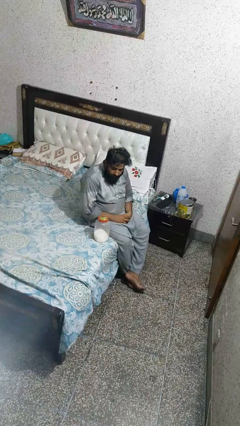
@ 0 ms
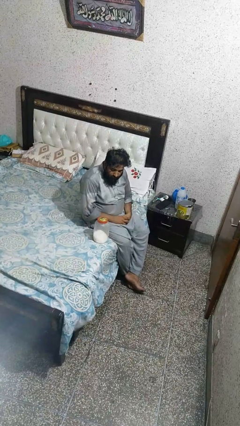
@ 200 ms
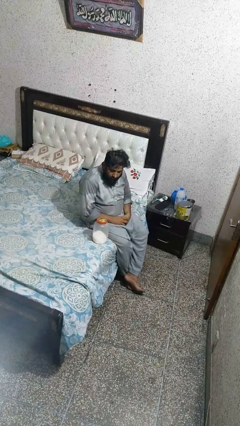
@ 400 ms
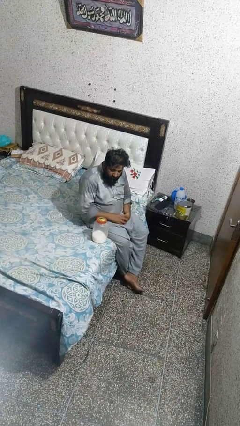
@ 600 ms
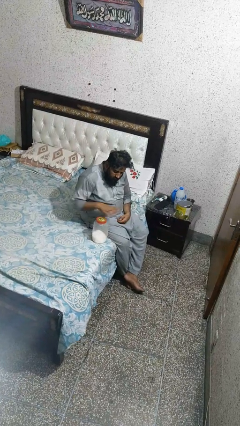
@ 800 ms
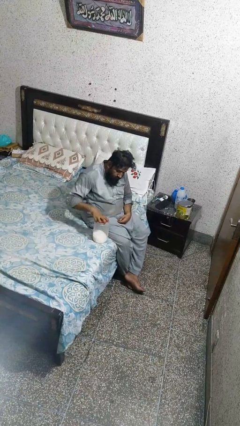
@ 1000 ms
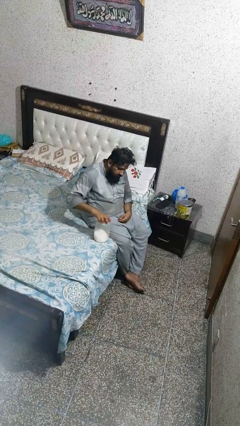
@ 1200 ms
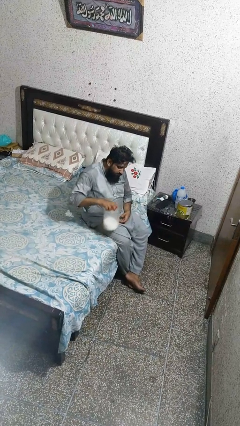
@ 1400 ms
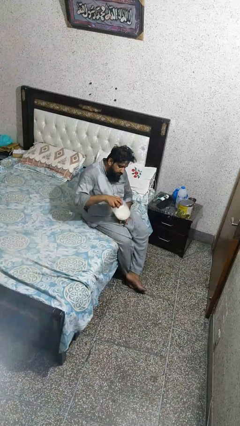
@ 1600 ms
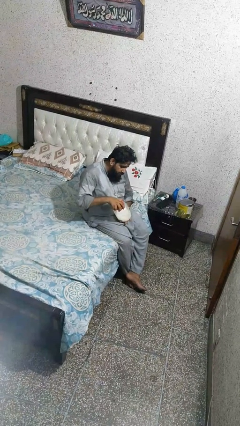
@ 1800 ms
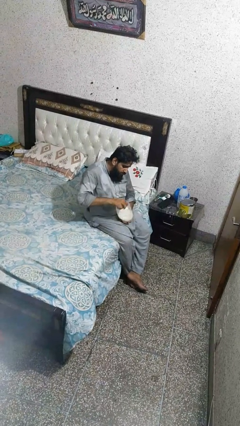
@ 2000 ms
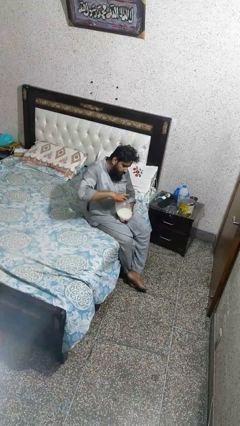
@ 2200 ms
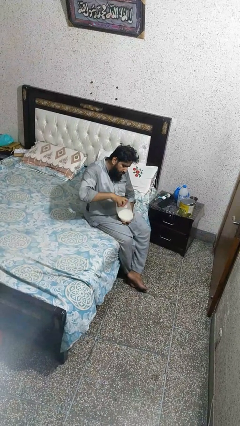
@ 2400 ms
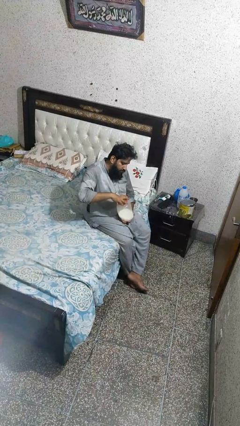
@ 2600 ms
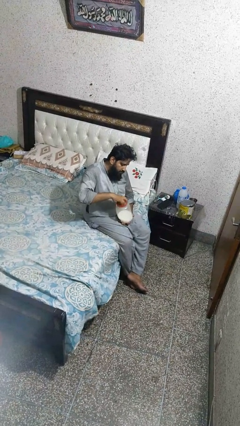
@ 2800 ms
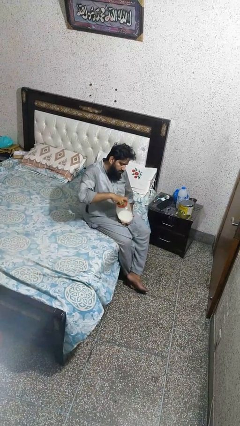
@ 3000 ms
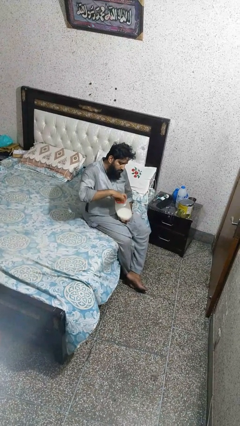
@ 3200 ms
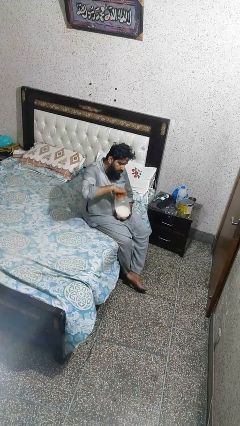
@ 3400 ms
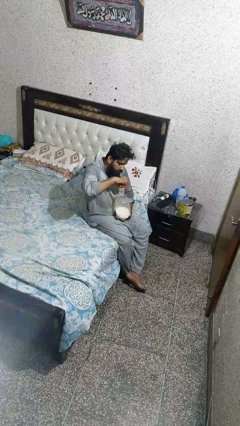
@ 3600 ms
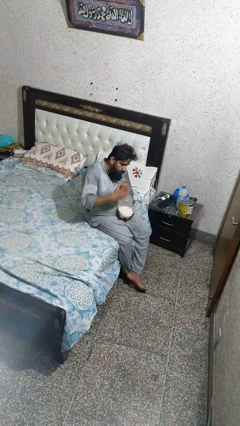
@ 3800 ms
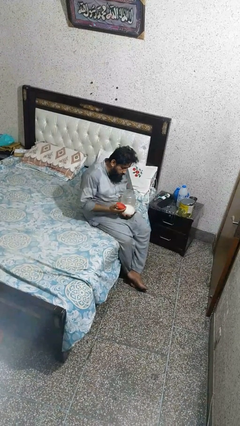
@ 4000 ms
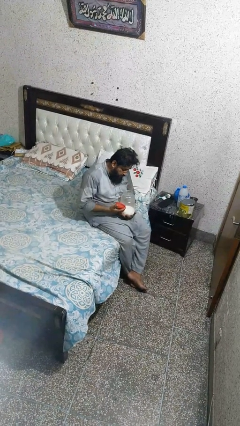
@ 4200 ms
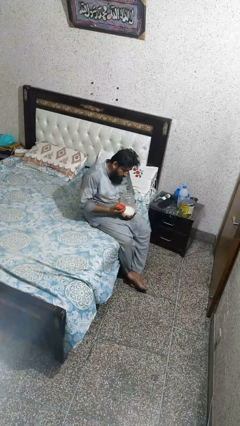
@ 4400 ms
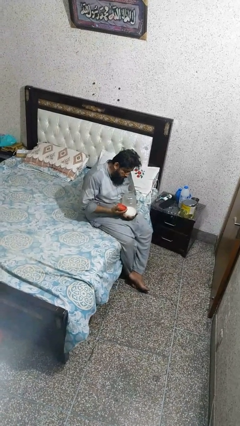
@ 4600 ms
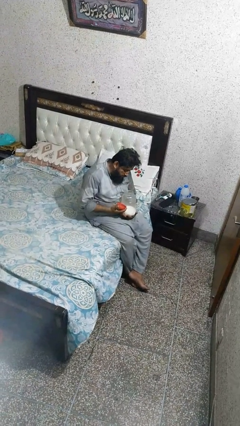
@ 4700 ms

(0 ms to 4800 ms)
person opens jar

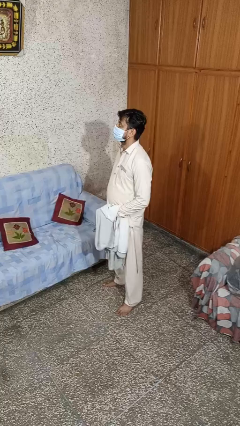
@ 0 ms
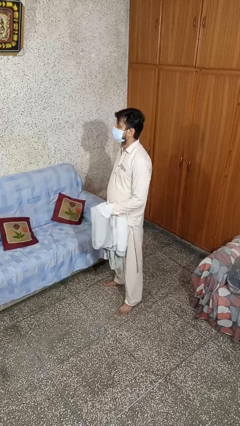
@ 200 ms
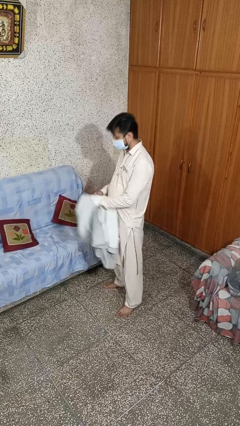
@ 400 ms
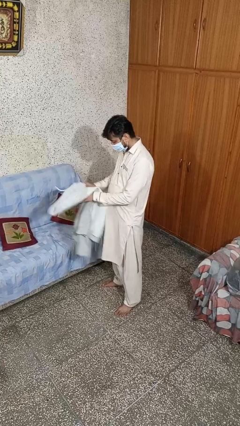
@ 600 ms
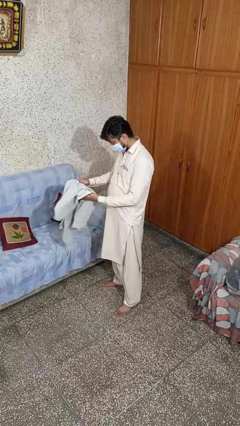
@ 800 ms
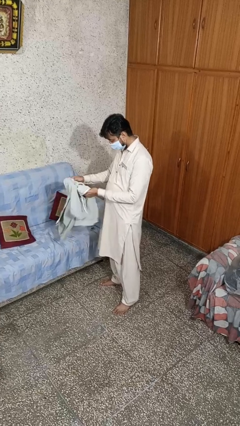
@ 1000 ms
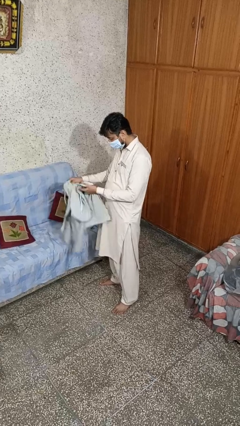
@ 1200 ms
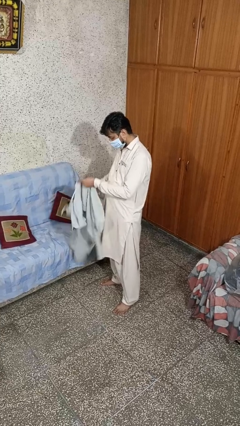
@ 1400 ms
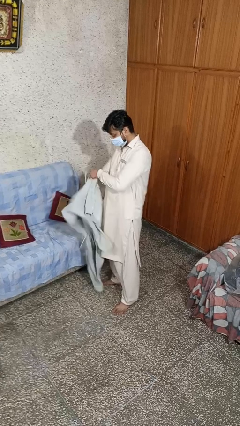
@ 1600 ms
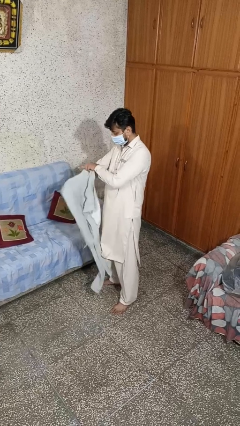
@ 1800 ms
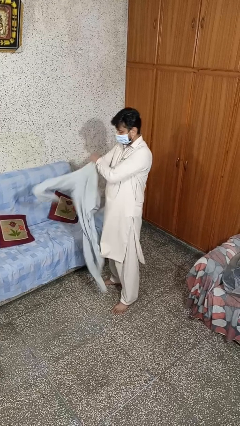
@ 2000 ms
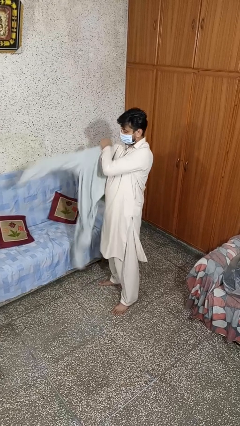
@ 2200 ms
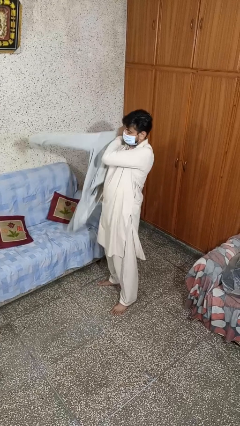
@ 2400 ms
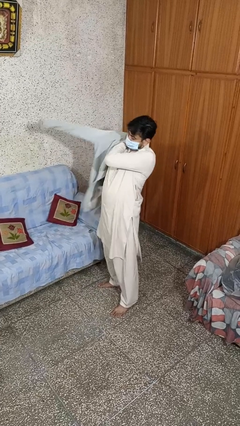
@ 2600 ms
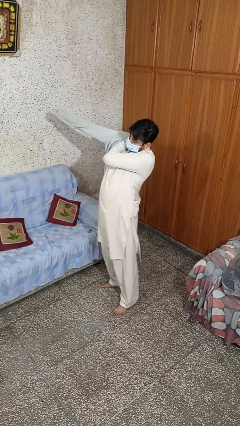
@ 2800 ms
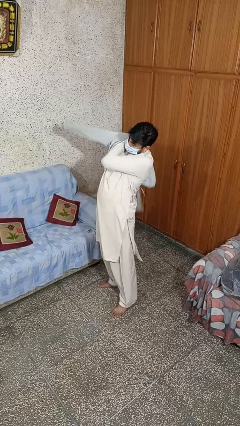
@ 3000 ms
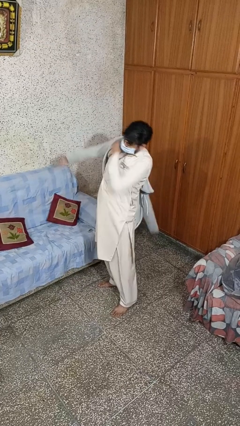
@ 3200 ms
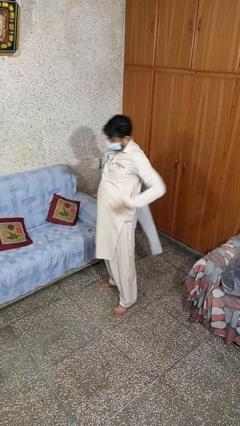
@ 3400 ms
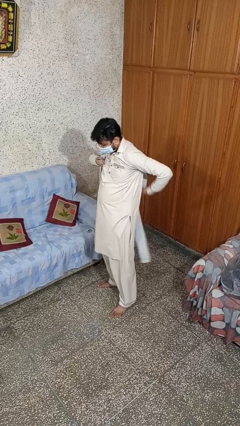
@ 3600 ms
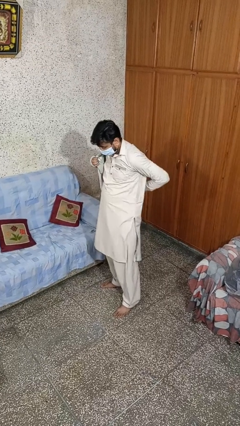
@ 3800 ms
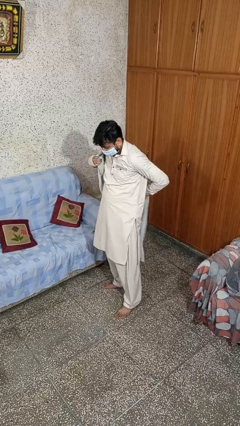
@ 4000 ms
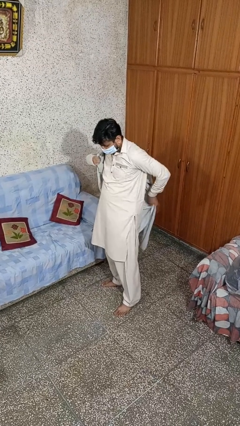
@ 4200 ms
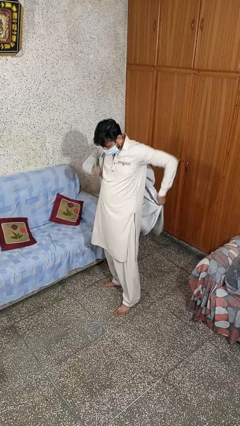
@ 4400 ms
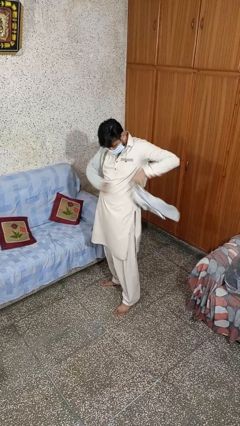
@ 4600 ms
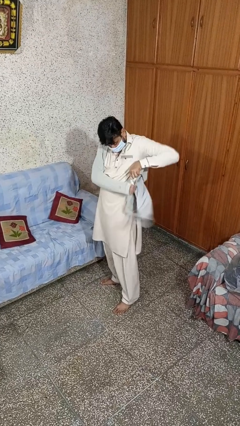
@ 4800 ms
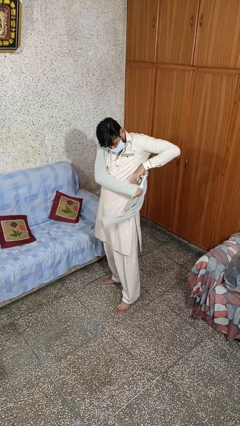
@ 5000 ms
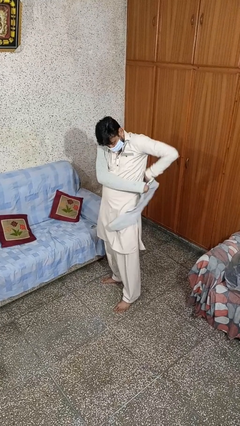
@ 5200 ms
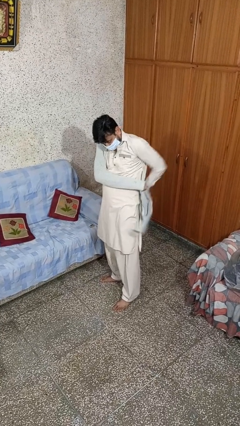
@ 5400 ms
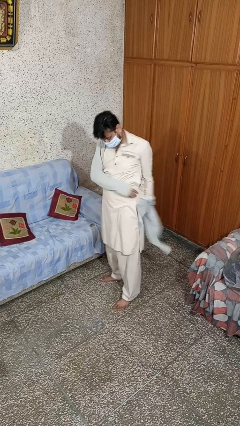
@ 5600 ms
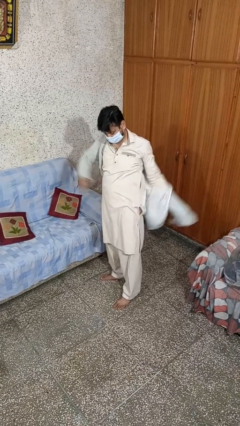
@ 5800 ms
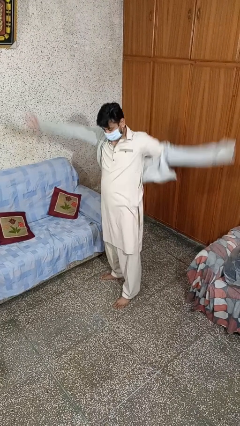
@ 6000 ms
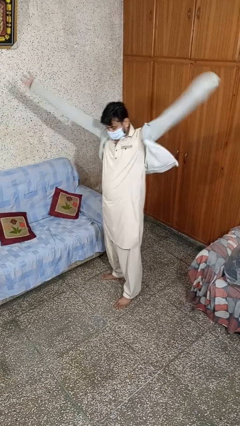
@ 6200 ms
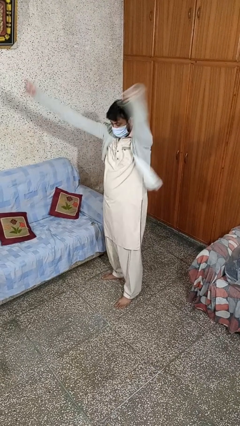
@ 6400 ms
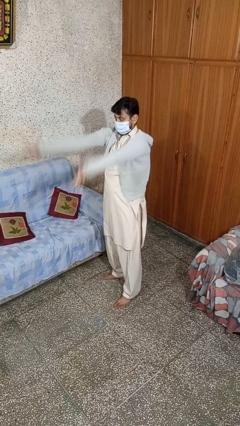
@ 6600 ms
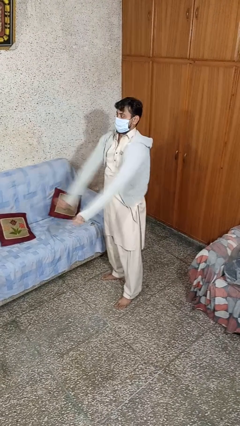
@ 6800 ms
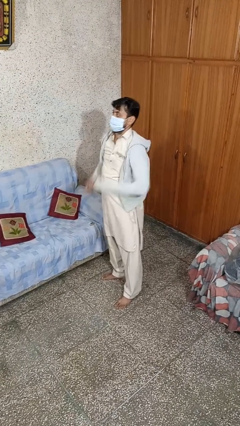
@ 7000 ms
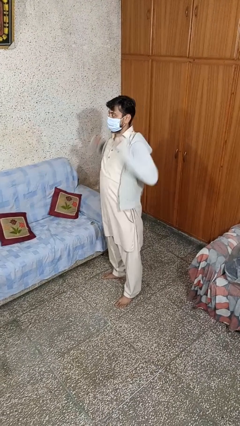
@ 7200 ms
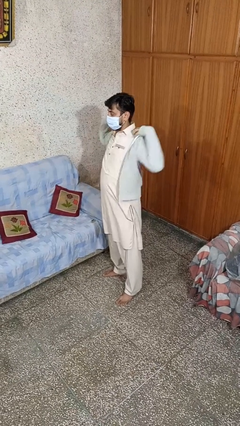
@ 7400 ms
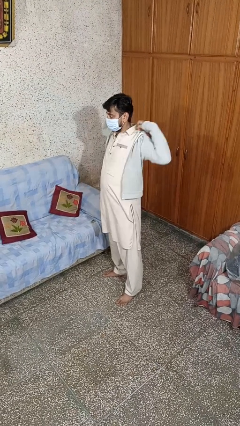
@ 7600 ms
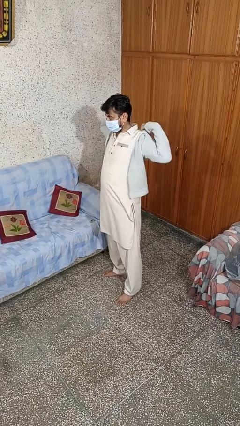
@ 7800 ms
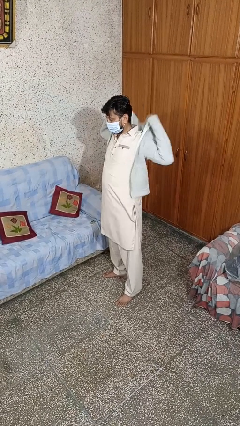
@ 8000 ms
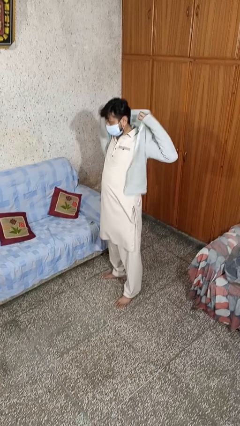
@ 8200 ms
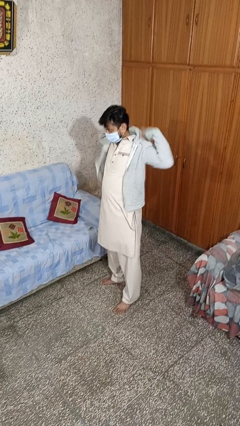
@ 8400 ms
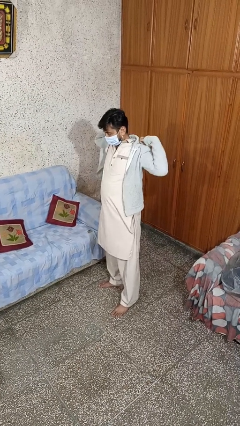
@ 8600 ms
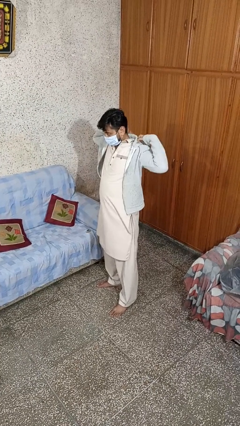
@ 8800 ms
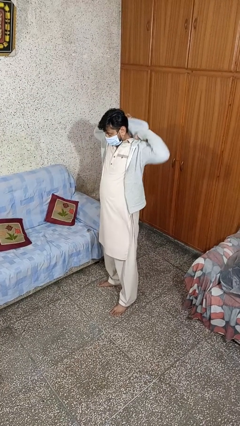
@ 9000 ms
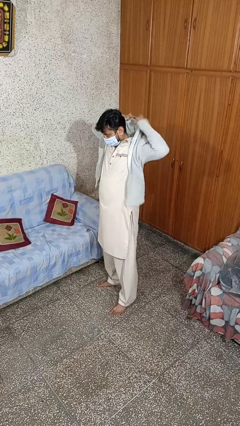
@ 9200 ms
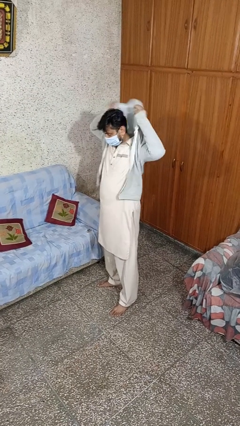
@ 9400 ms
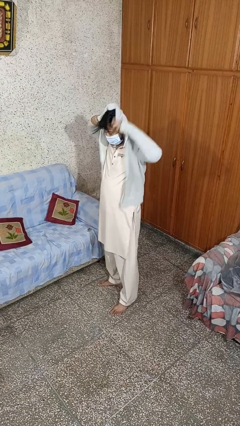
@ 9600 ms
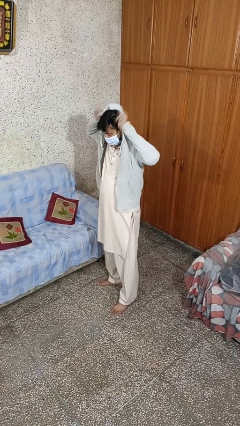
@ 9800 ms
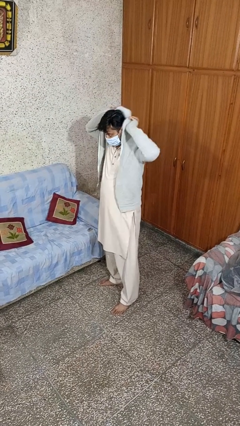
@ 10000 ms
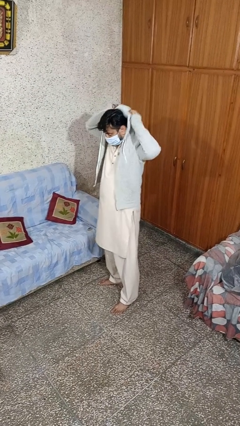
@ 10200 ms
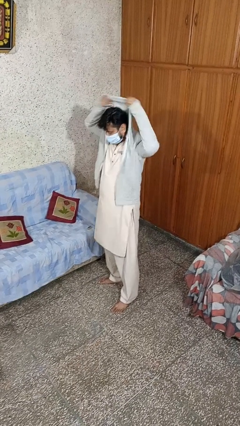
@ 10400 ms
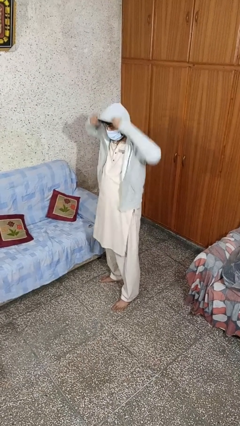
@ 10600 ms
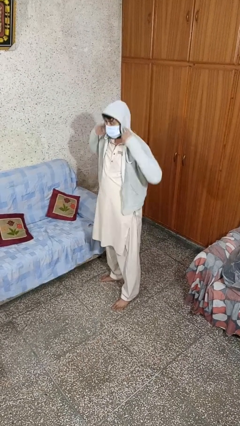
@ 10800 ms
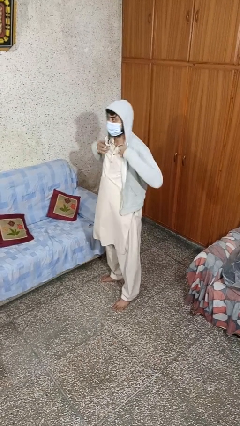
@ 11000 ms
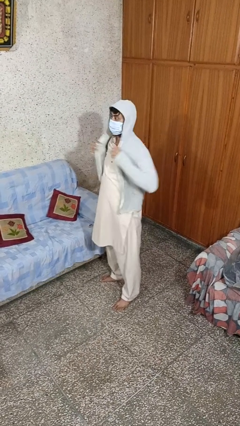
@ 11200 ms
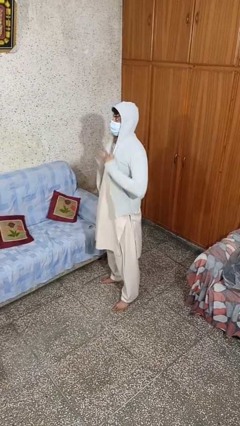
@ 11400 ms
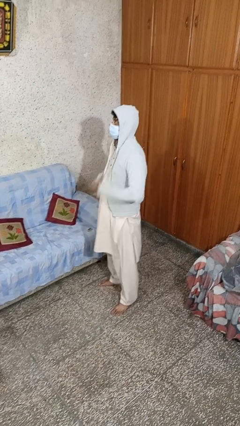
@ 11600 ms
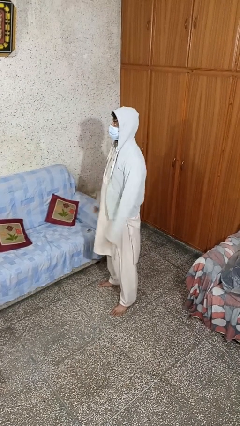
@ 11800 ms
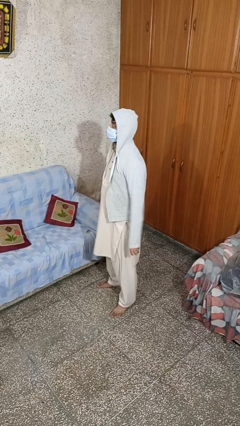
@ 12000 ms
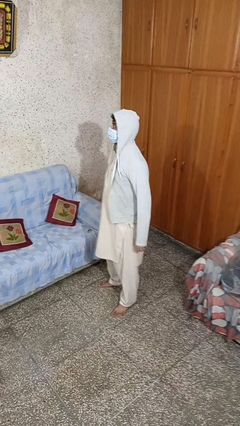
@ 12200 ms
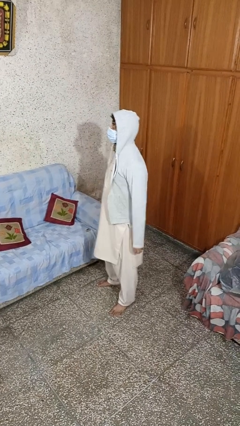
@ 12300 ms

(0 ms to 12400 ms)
person puts on hoodie

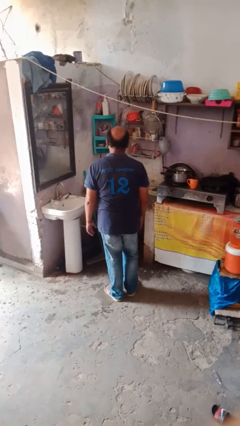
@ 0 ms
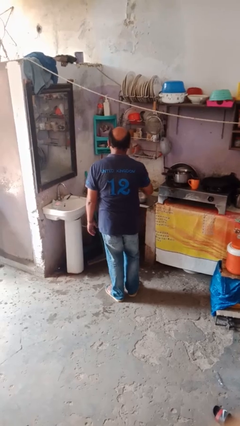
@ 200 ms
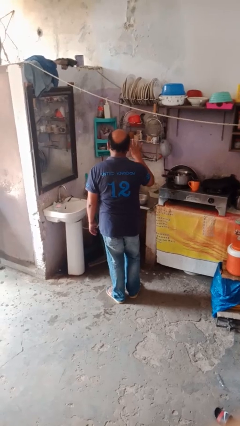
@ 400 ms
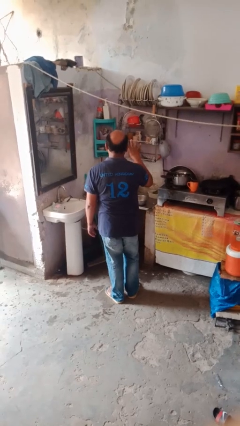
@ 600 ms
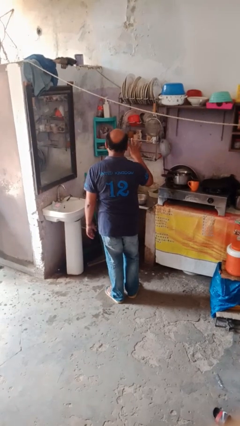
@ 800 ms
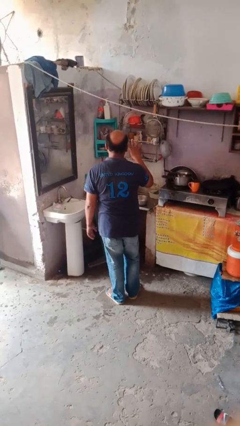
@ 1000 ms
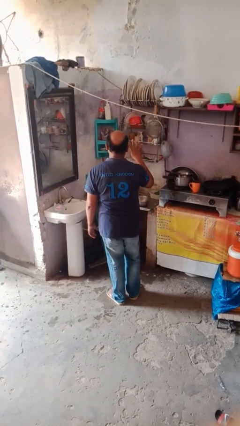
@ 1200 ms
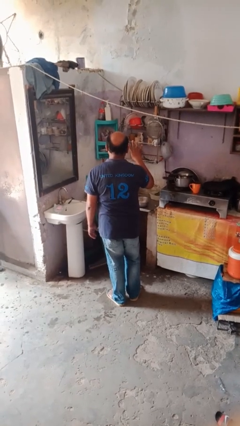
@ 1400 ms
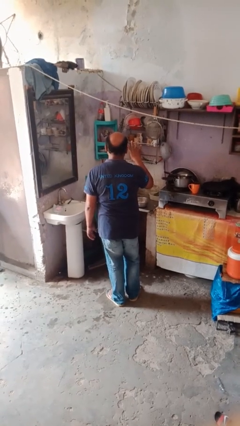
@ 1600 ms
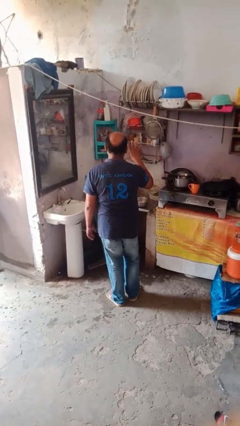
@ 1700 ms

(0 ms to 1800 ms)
person gestures number four
